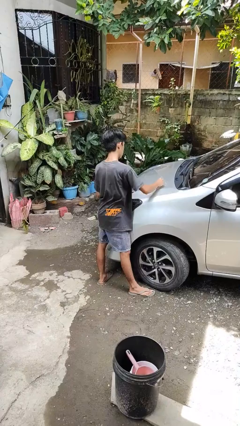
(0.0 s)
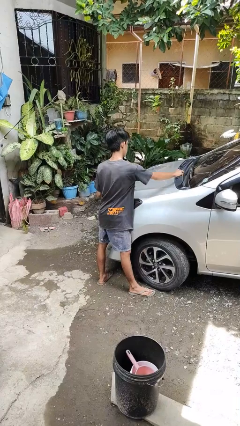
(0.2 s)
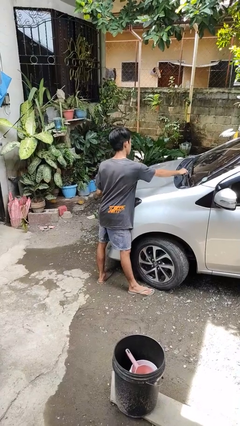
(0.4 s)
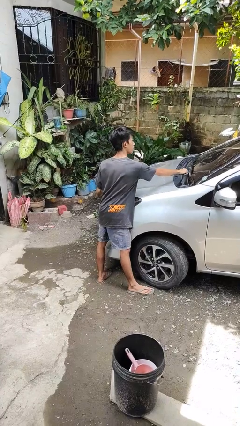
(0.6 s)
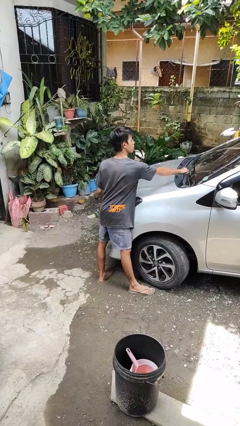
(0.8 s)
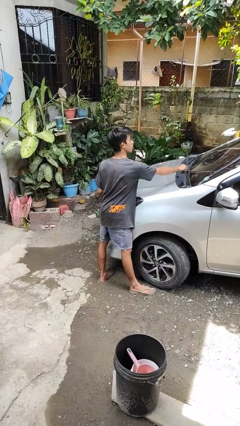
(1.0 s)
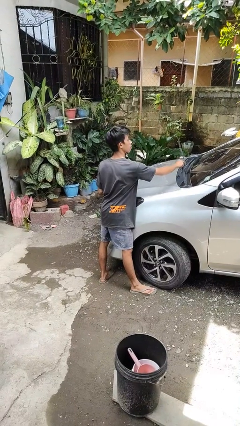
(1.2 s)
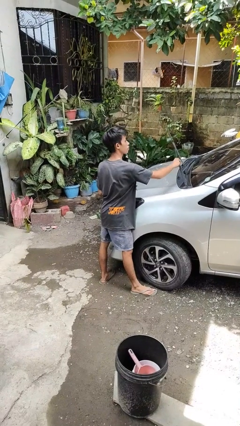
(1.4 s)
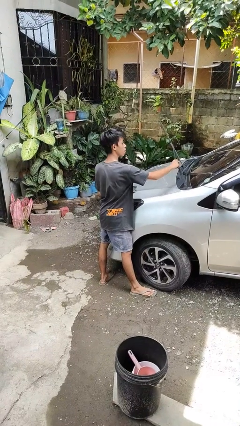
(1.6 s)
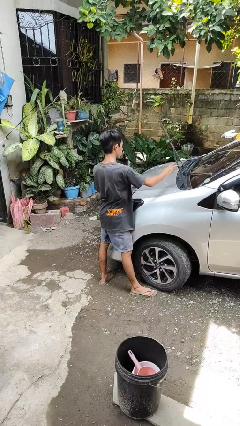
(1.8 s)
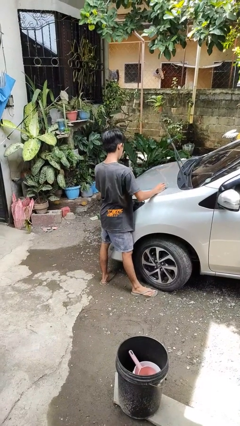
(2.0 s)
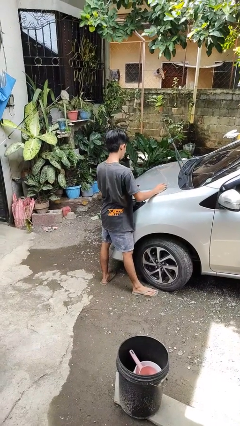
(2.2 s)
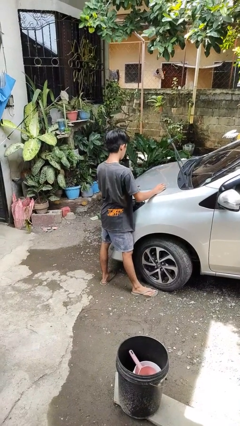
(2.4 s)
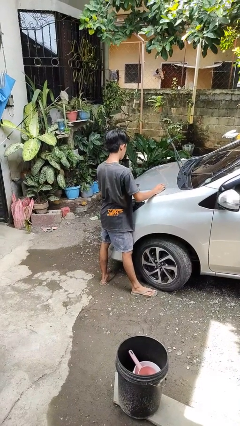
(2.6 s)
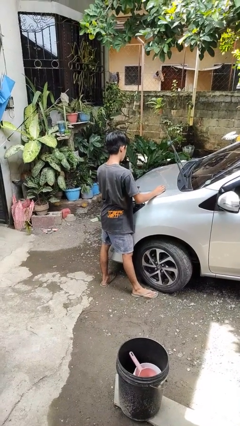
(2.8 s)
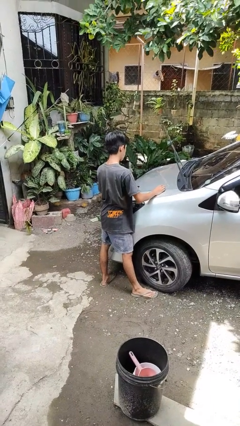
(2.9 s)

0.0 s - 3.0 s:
person flips up car wipers

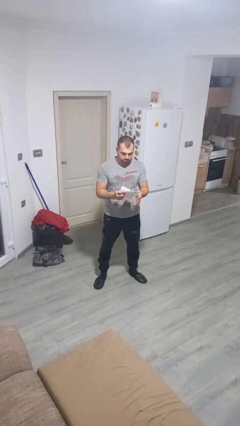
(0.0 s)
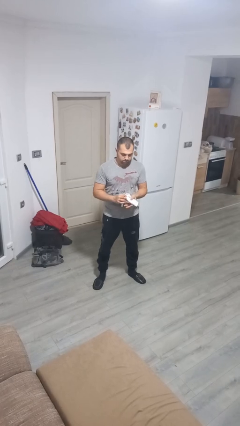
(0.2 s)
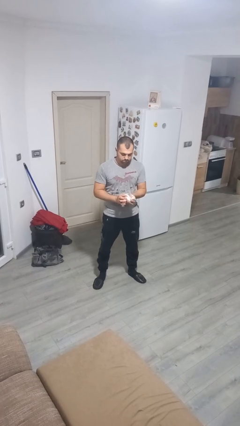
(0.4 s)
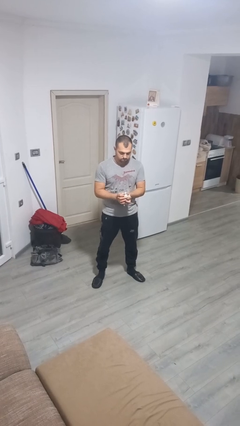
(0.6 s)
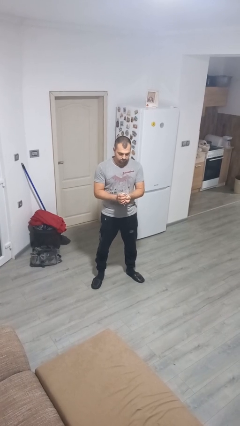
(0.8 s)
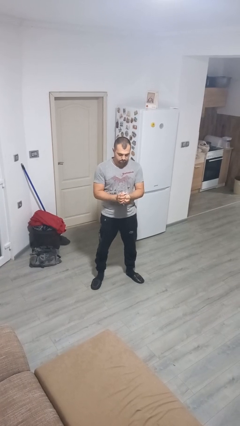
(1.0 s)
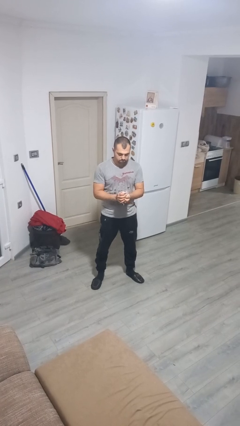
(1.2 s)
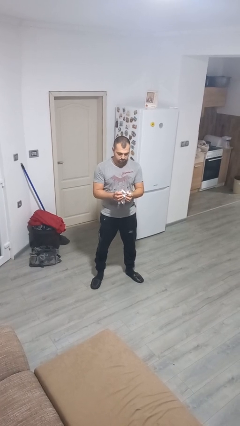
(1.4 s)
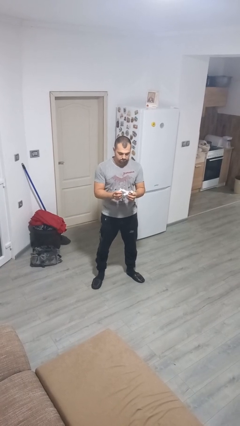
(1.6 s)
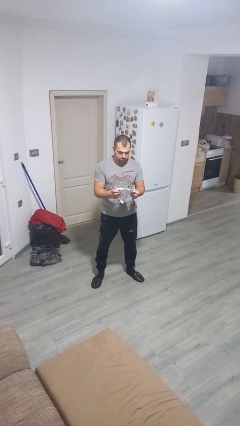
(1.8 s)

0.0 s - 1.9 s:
person crumples paper

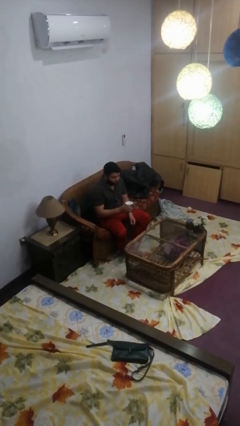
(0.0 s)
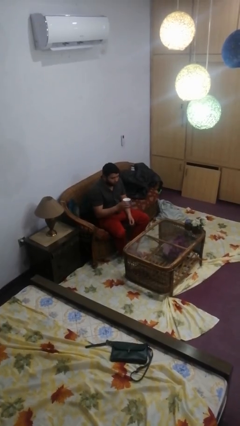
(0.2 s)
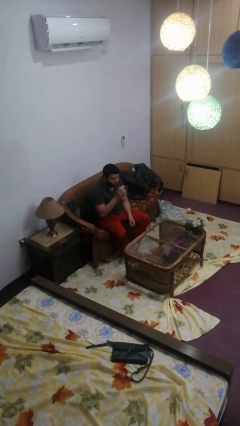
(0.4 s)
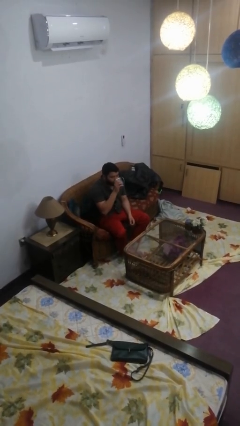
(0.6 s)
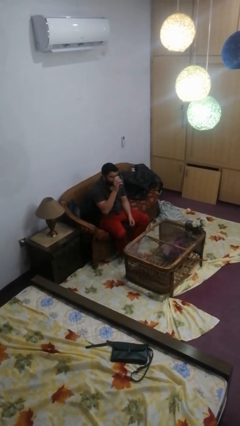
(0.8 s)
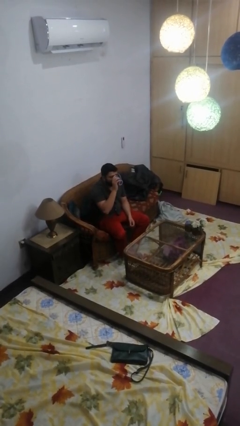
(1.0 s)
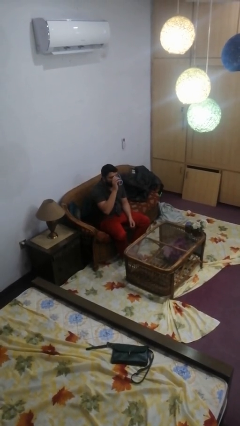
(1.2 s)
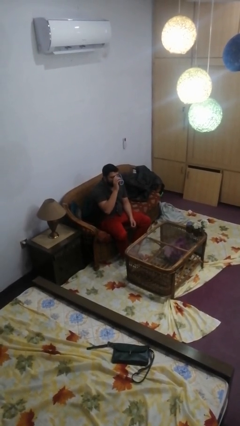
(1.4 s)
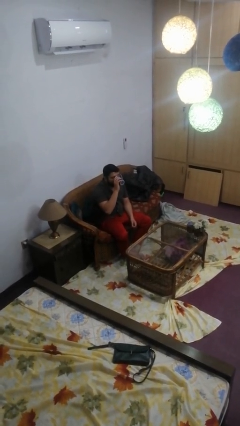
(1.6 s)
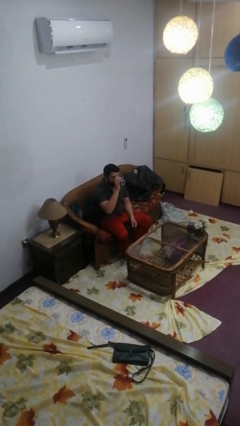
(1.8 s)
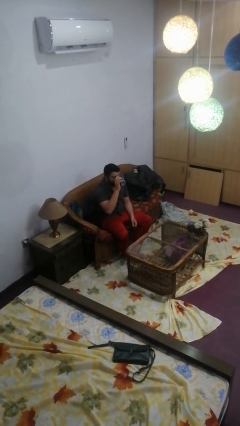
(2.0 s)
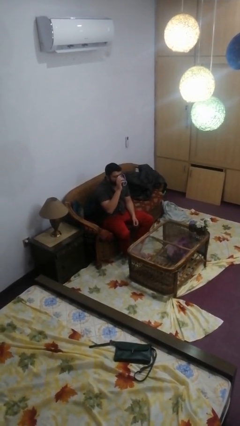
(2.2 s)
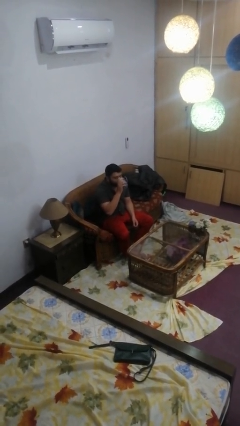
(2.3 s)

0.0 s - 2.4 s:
person drinks from mug

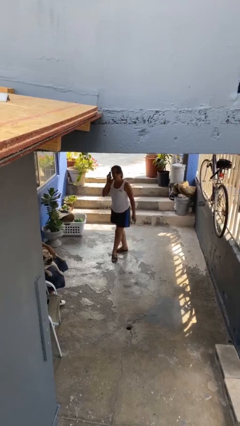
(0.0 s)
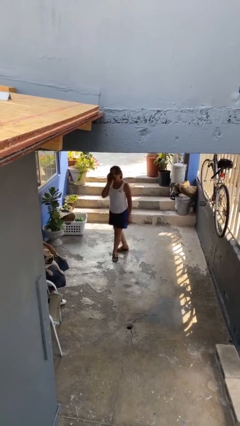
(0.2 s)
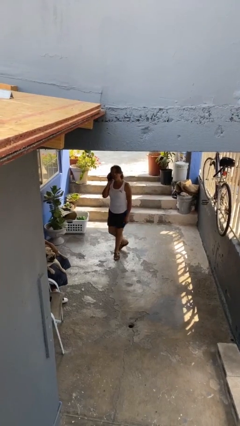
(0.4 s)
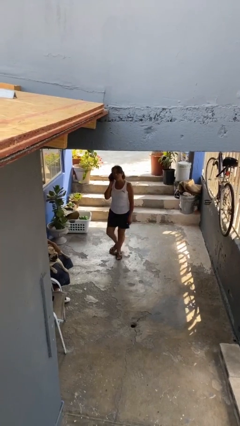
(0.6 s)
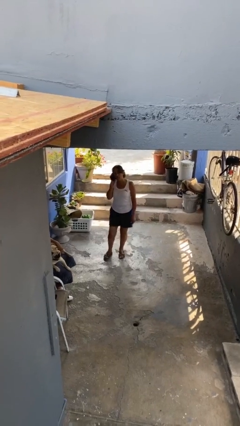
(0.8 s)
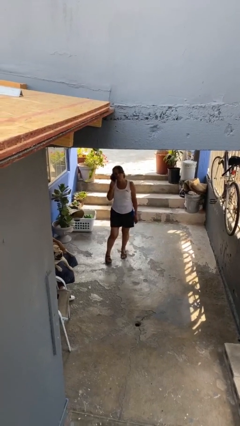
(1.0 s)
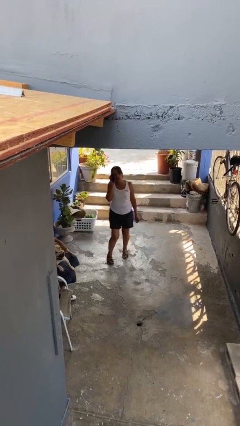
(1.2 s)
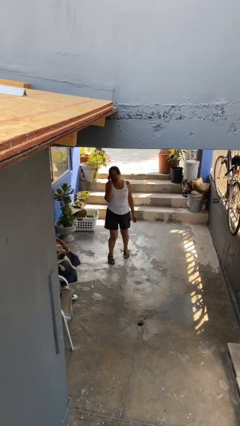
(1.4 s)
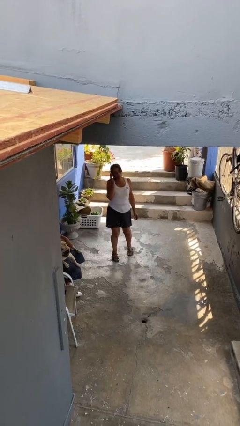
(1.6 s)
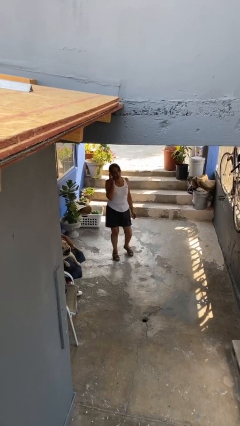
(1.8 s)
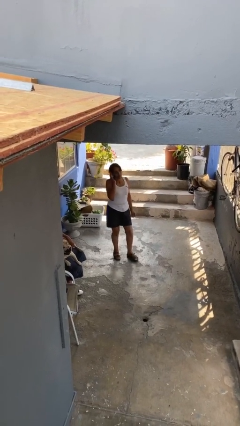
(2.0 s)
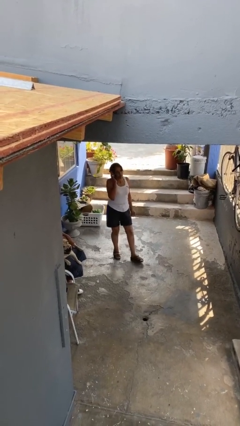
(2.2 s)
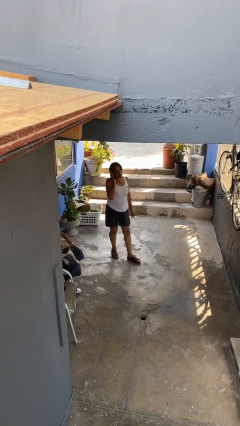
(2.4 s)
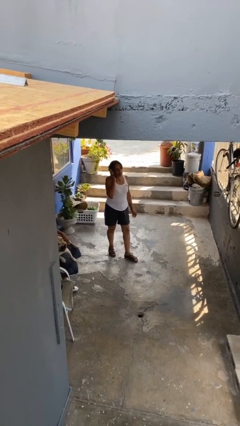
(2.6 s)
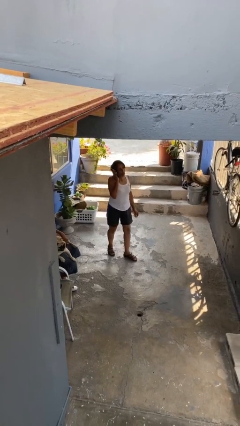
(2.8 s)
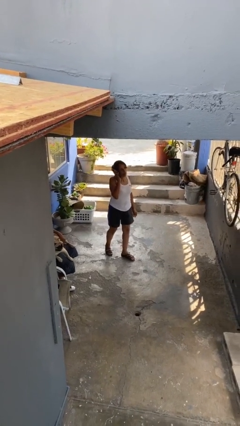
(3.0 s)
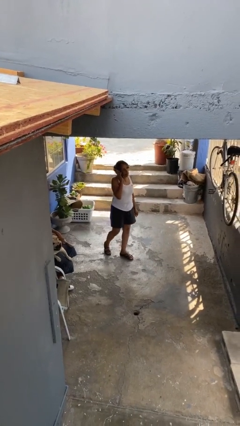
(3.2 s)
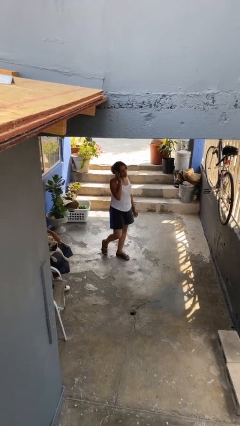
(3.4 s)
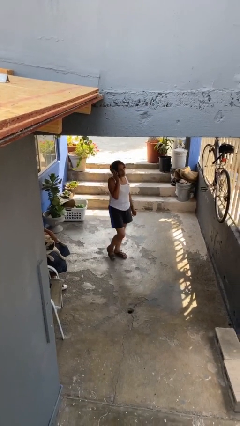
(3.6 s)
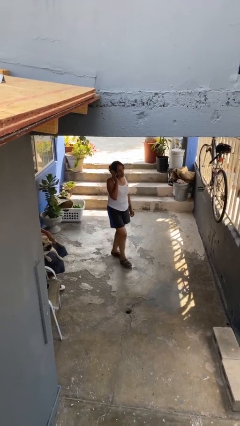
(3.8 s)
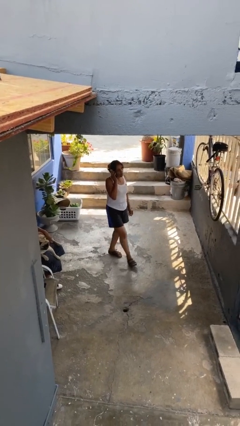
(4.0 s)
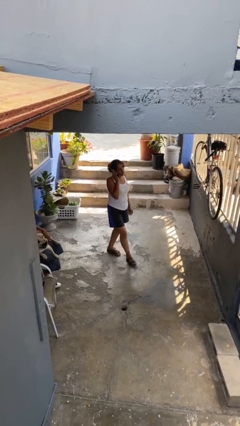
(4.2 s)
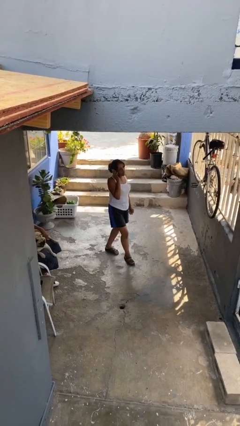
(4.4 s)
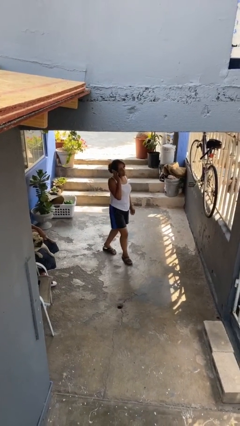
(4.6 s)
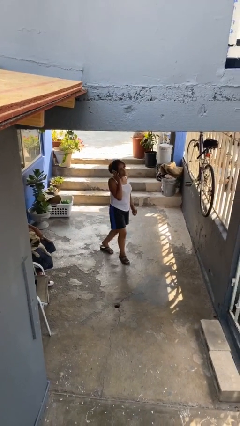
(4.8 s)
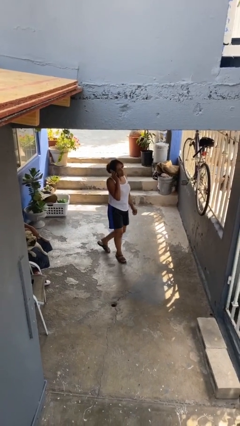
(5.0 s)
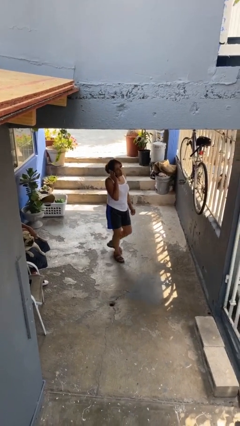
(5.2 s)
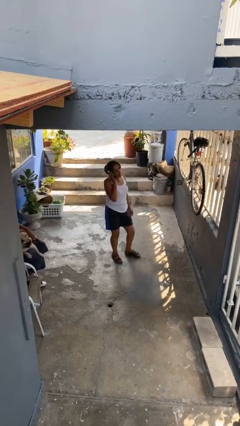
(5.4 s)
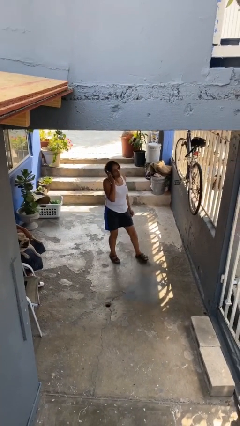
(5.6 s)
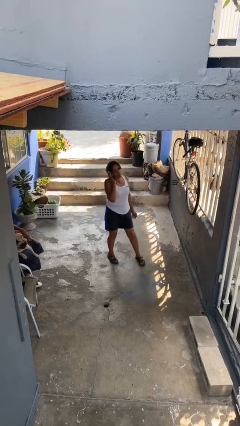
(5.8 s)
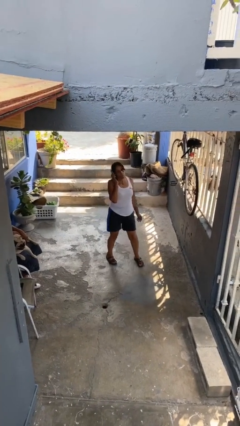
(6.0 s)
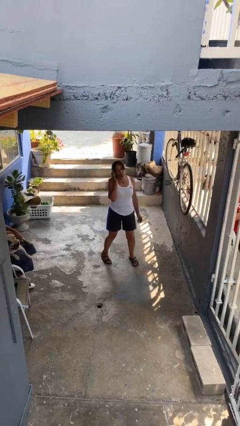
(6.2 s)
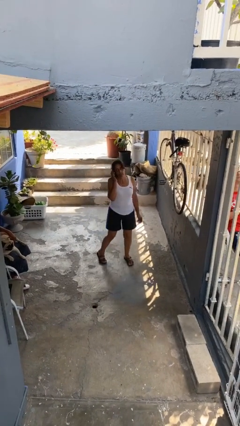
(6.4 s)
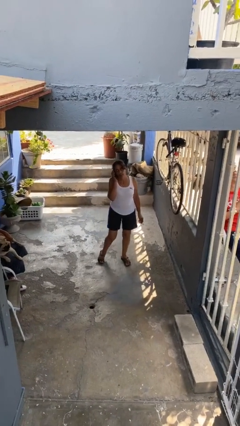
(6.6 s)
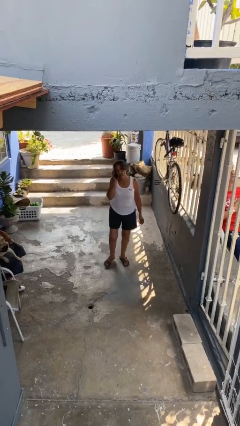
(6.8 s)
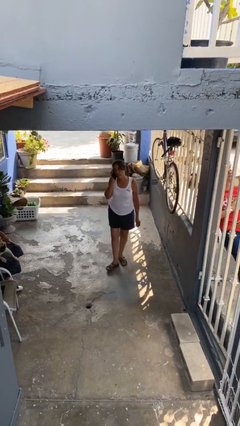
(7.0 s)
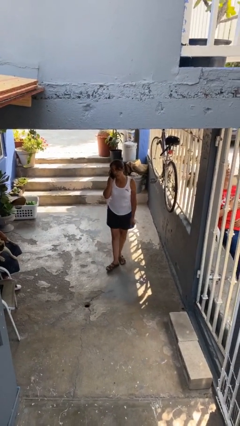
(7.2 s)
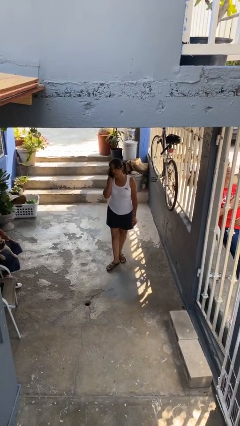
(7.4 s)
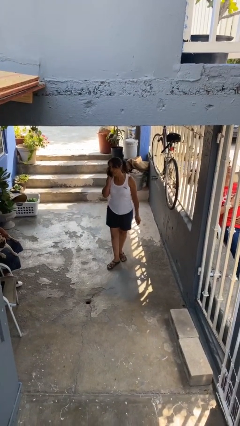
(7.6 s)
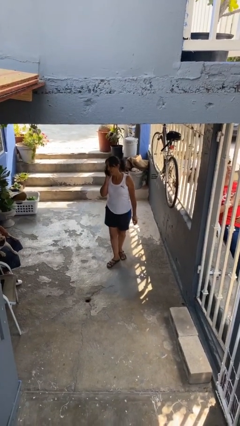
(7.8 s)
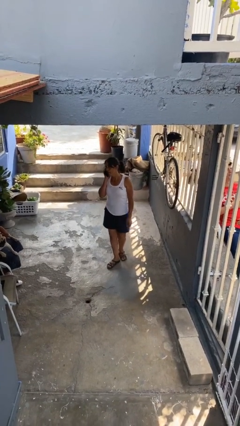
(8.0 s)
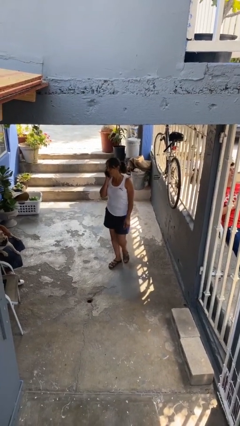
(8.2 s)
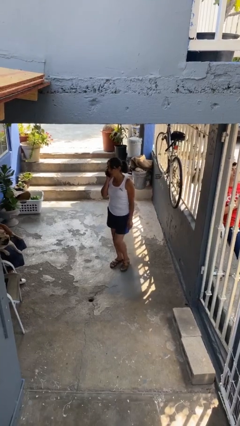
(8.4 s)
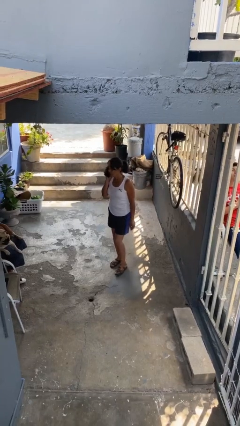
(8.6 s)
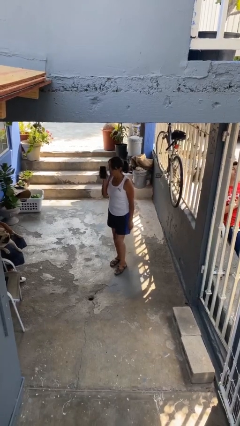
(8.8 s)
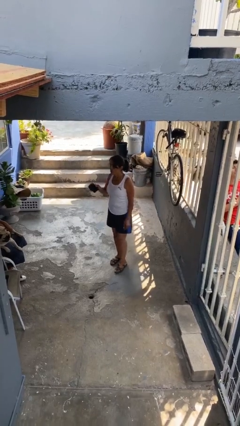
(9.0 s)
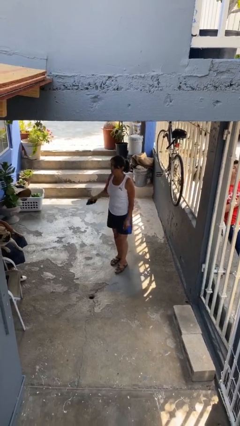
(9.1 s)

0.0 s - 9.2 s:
person talks on phone

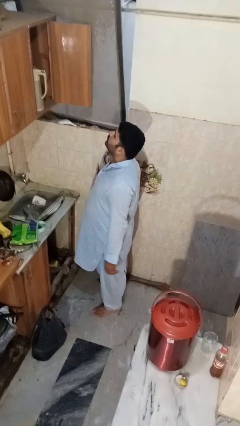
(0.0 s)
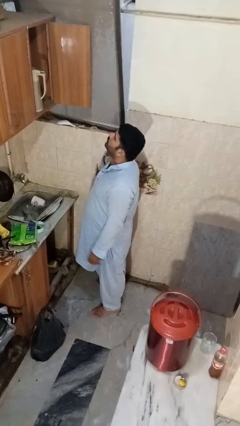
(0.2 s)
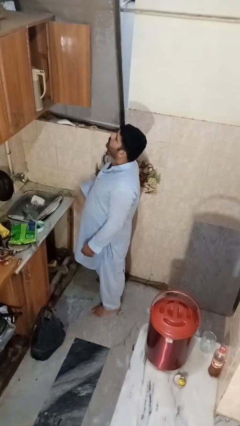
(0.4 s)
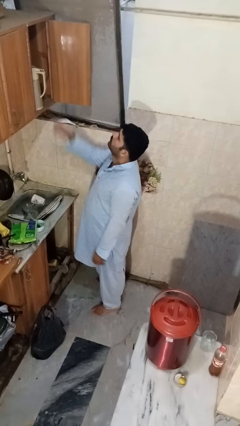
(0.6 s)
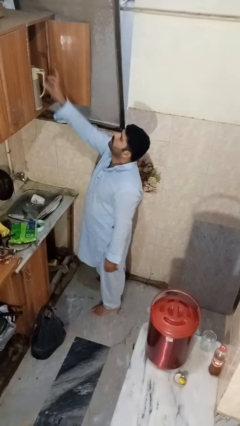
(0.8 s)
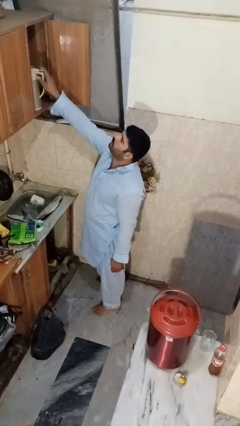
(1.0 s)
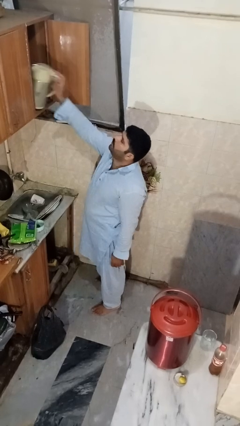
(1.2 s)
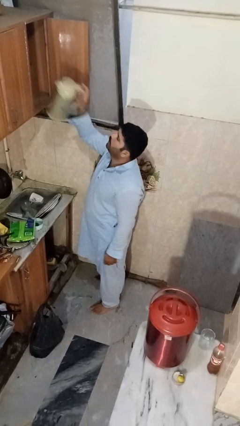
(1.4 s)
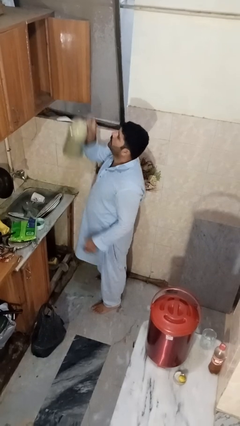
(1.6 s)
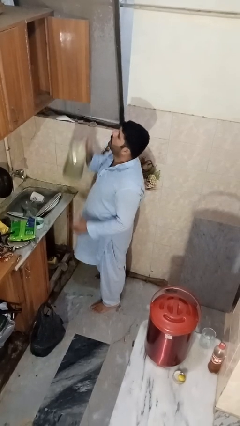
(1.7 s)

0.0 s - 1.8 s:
person takes object from cabinet
